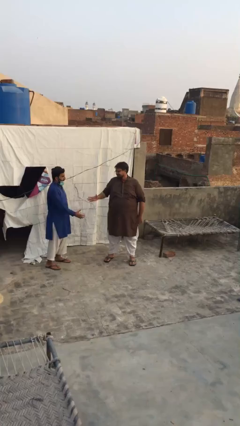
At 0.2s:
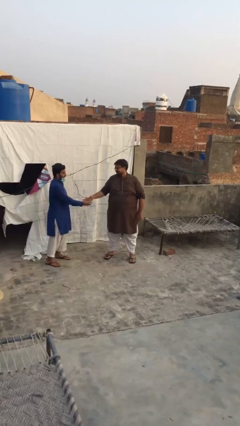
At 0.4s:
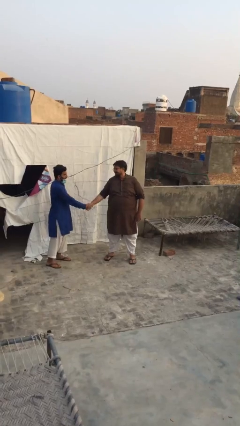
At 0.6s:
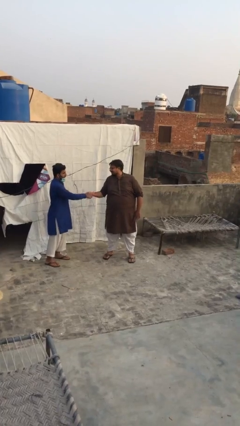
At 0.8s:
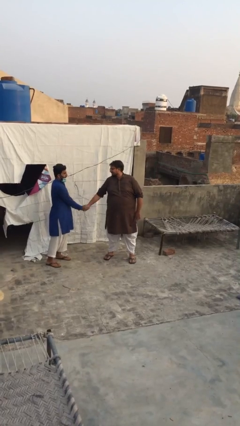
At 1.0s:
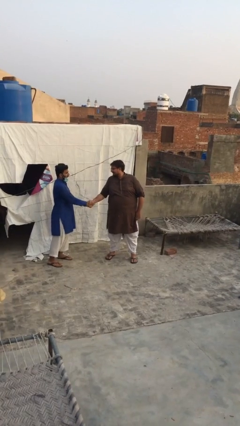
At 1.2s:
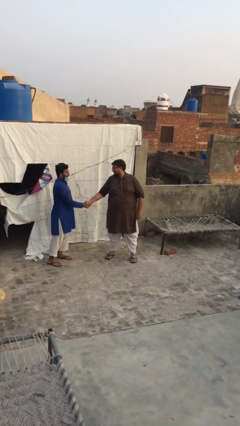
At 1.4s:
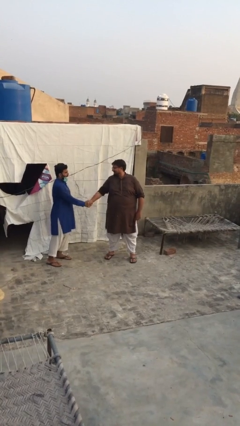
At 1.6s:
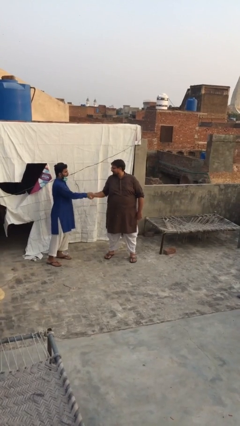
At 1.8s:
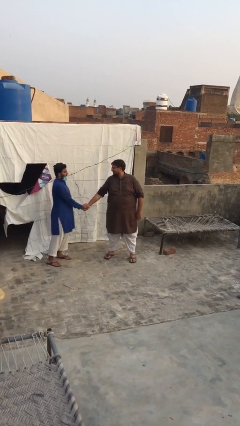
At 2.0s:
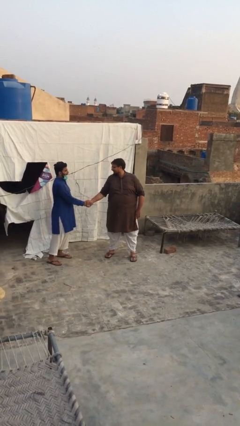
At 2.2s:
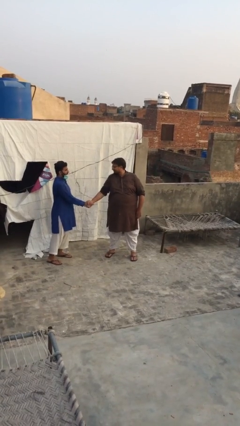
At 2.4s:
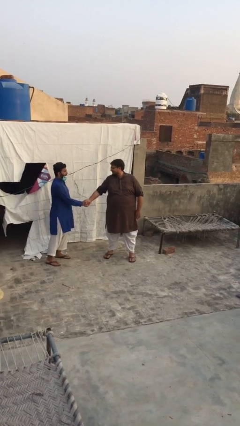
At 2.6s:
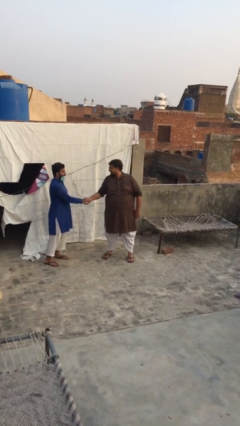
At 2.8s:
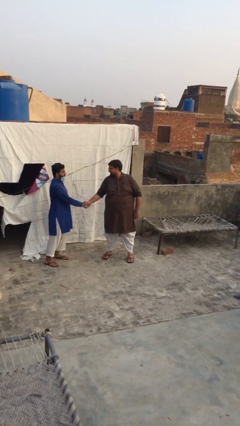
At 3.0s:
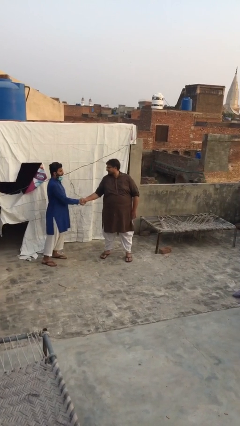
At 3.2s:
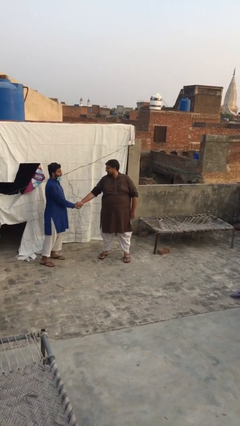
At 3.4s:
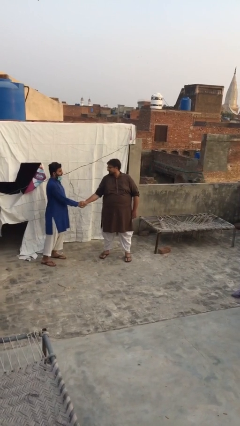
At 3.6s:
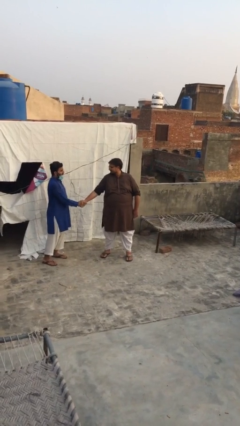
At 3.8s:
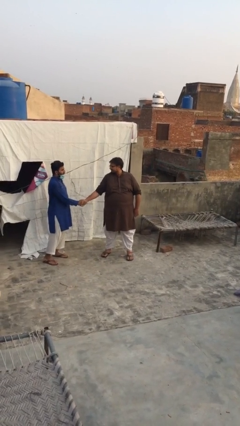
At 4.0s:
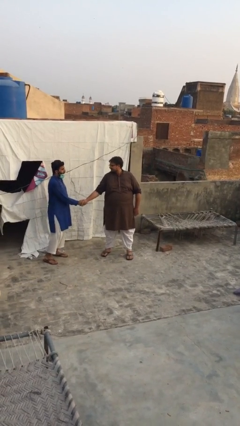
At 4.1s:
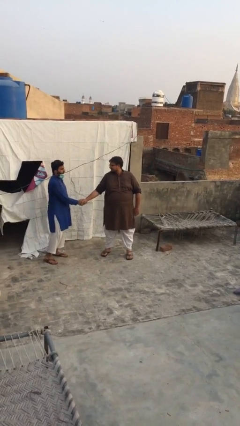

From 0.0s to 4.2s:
person shakes hand

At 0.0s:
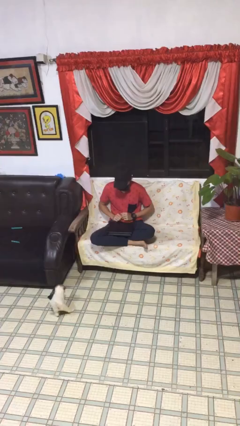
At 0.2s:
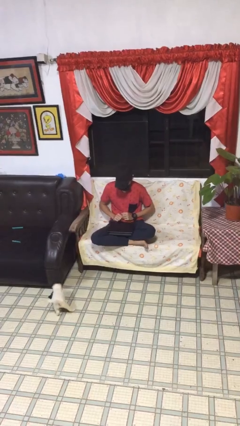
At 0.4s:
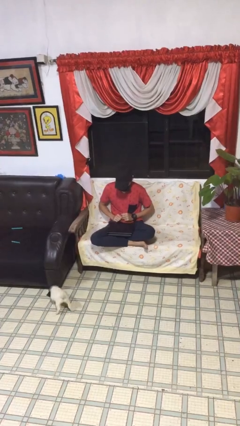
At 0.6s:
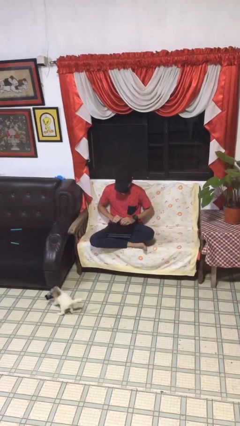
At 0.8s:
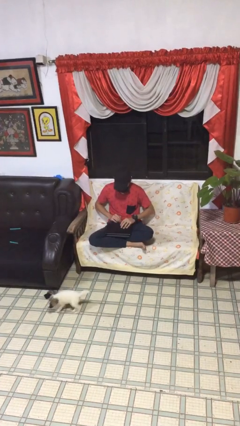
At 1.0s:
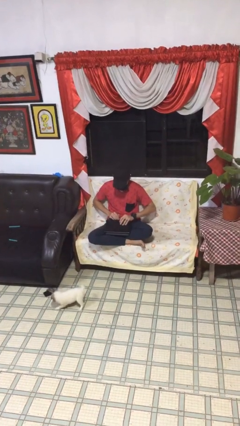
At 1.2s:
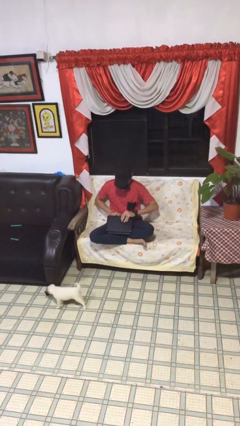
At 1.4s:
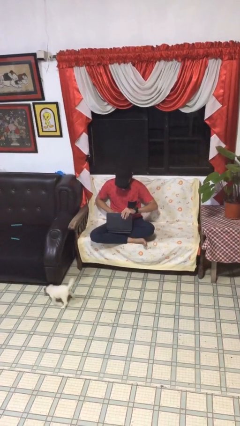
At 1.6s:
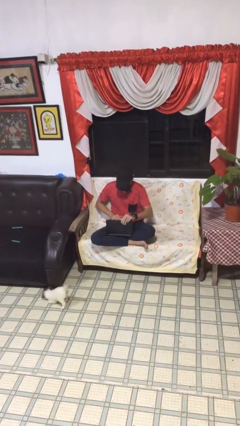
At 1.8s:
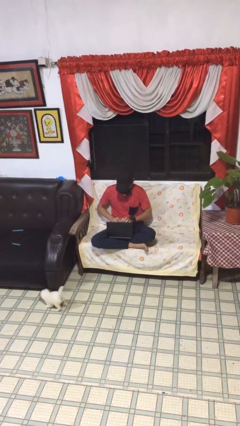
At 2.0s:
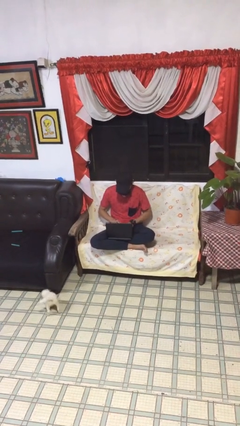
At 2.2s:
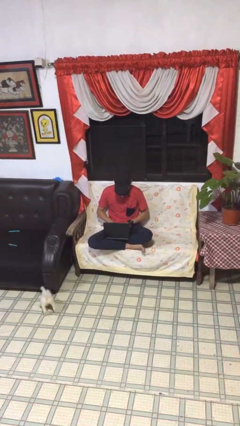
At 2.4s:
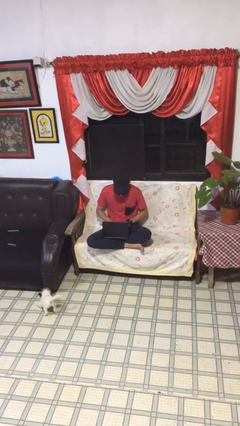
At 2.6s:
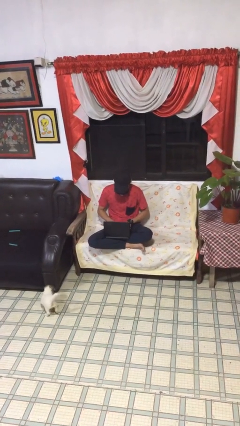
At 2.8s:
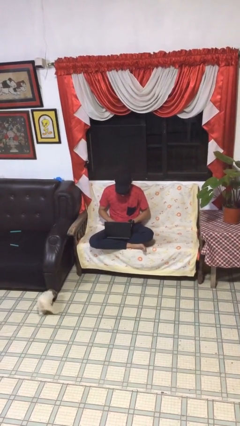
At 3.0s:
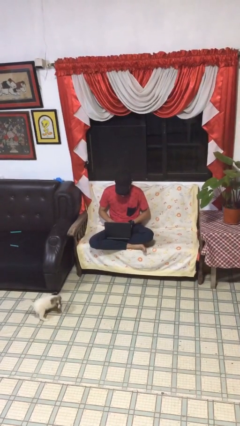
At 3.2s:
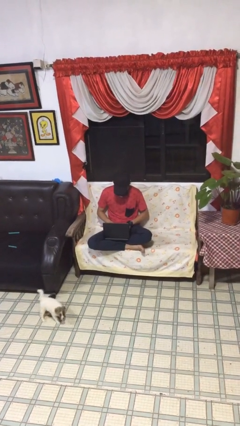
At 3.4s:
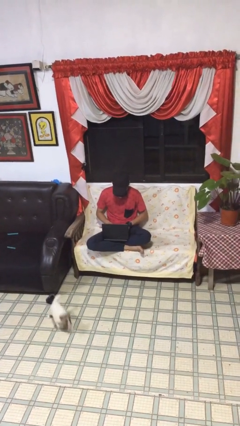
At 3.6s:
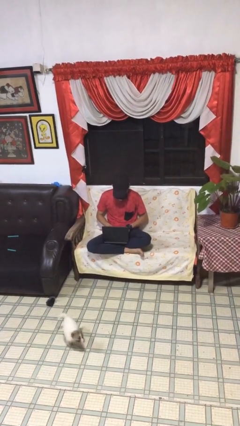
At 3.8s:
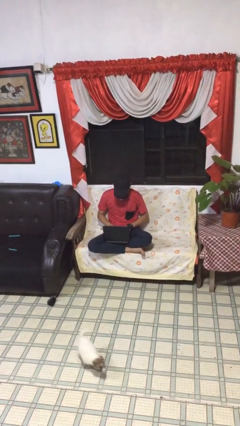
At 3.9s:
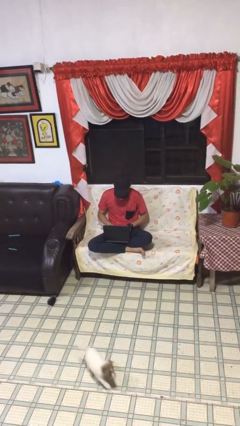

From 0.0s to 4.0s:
person interacts with laptop

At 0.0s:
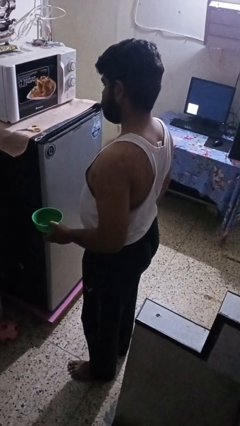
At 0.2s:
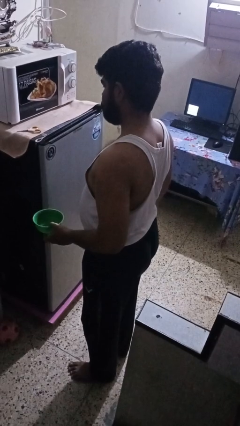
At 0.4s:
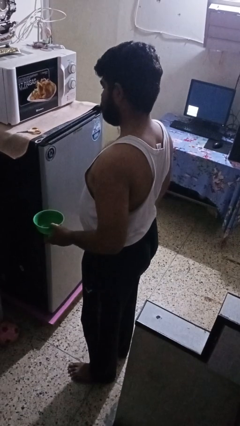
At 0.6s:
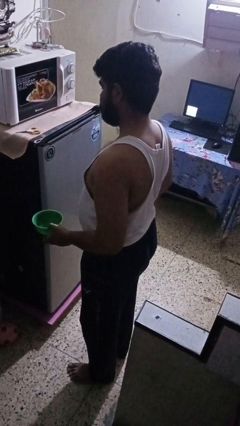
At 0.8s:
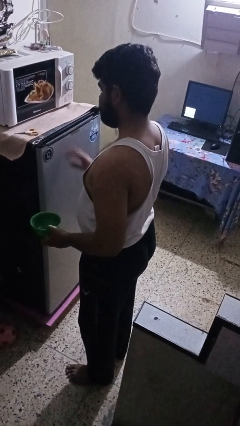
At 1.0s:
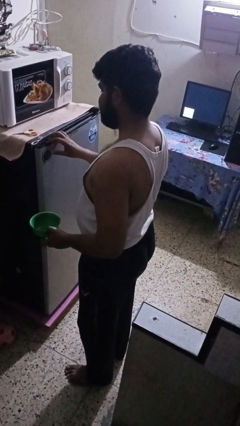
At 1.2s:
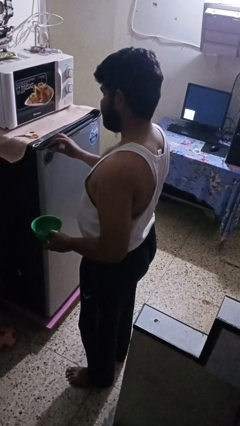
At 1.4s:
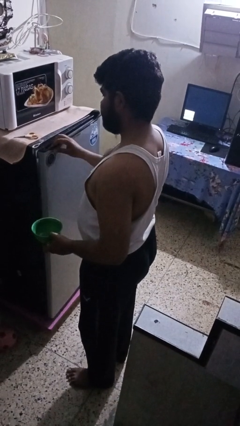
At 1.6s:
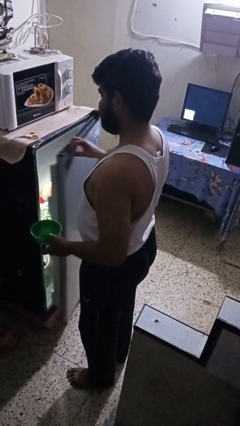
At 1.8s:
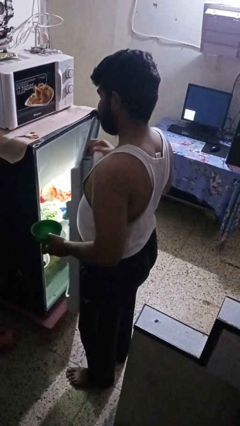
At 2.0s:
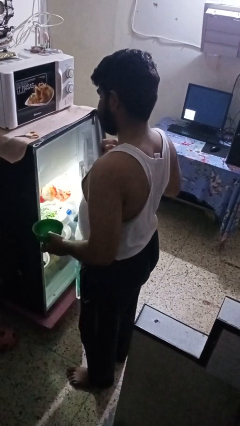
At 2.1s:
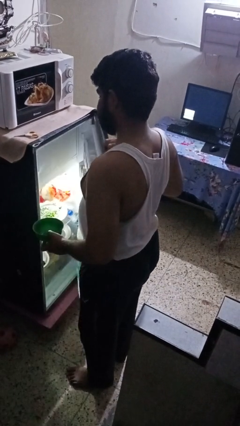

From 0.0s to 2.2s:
person opens refrigerator

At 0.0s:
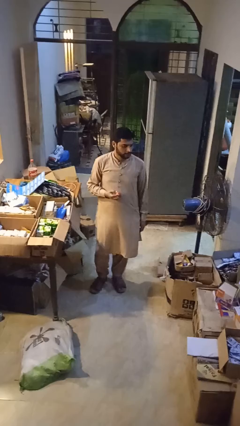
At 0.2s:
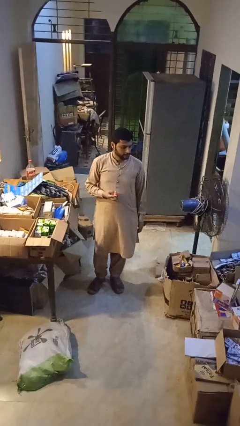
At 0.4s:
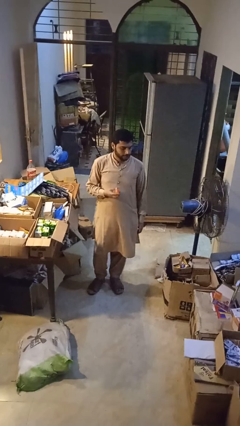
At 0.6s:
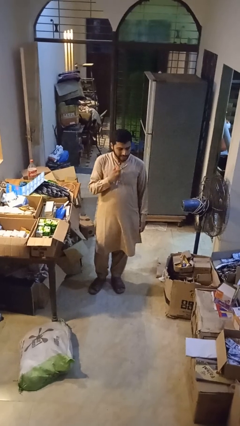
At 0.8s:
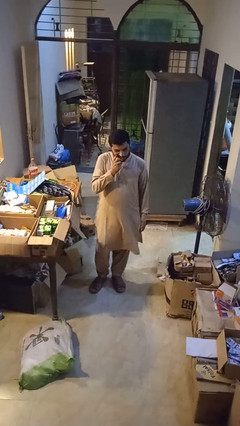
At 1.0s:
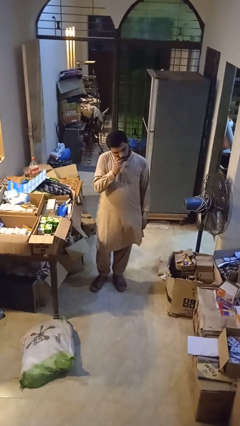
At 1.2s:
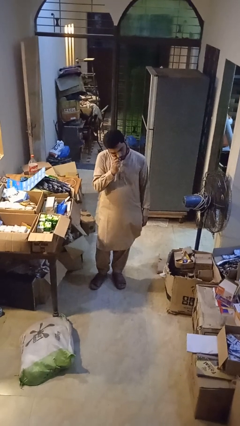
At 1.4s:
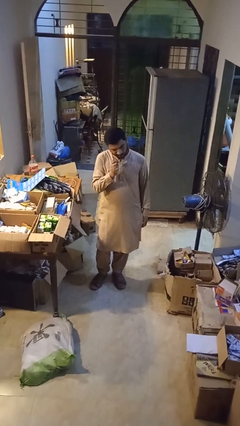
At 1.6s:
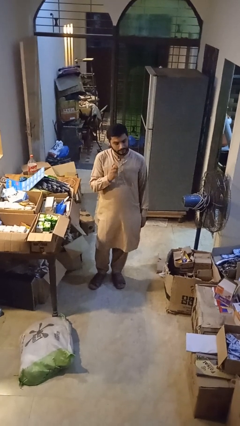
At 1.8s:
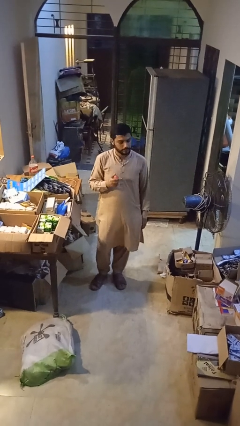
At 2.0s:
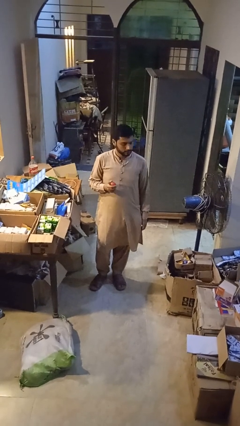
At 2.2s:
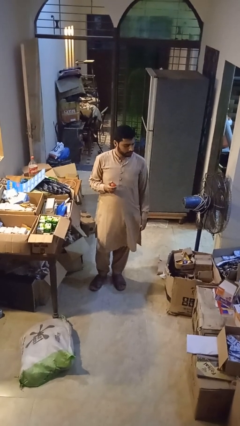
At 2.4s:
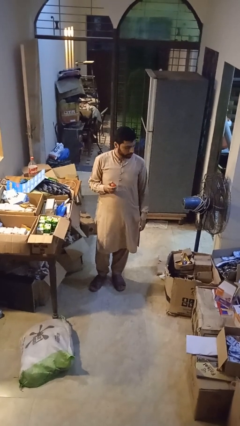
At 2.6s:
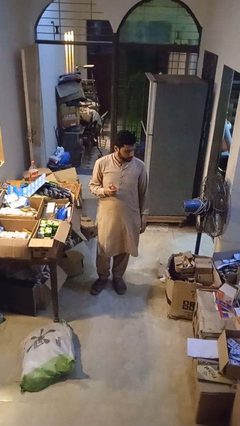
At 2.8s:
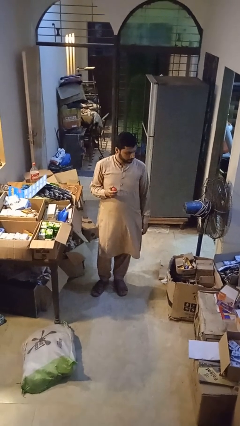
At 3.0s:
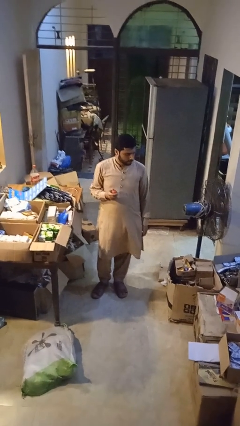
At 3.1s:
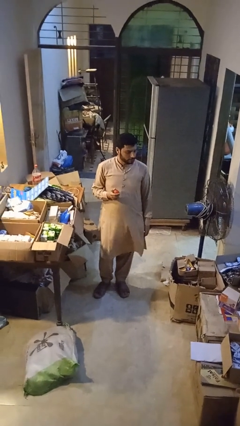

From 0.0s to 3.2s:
person eats apple

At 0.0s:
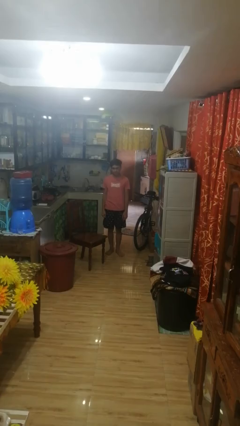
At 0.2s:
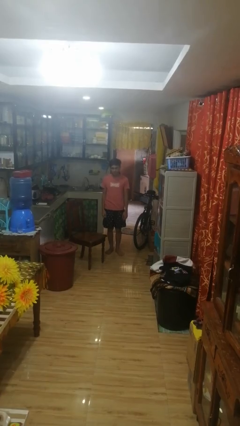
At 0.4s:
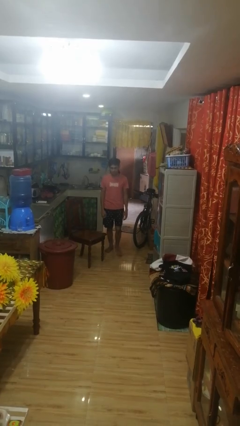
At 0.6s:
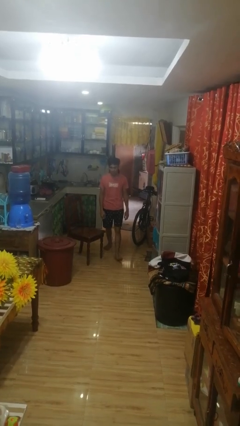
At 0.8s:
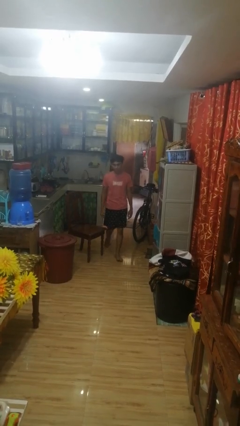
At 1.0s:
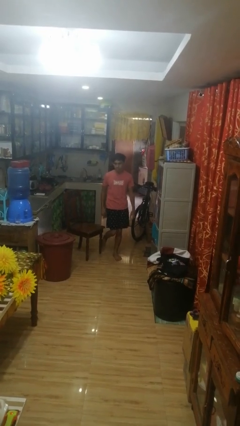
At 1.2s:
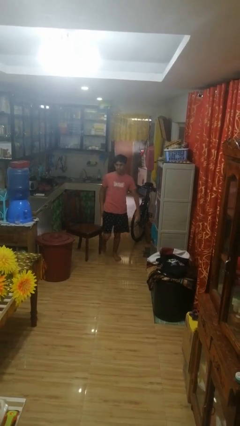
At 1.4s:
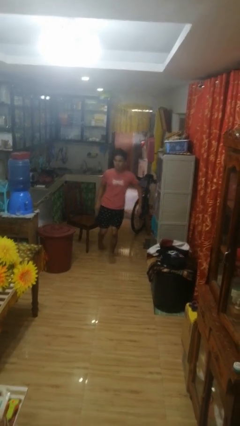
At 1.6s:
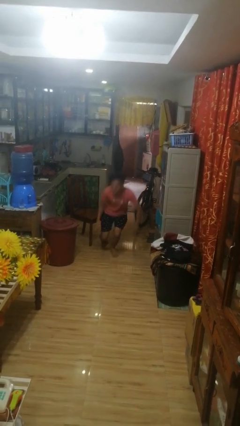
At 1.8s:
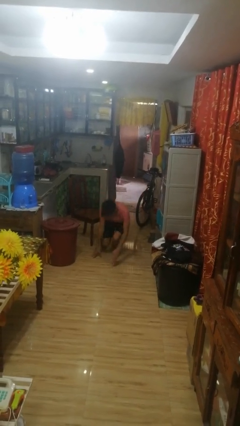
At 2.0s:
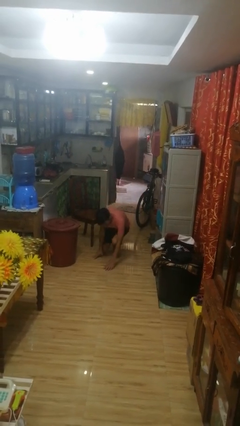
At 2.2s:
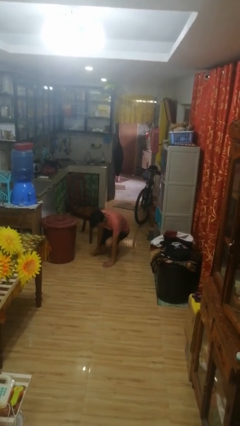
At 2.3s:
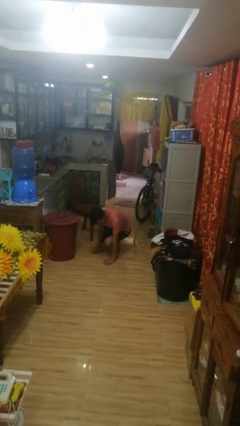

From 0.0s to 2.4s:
person trips on object on floor

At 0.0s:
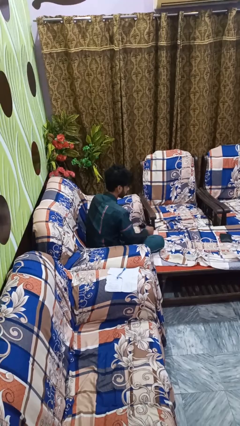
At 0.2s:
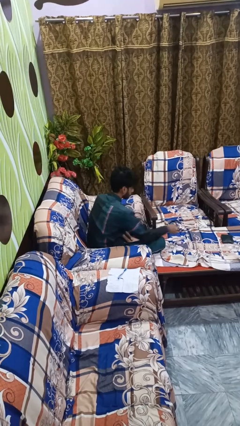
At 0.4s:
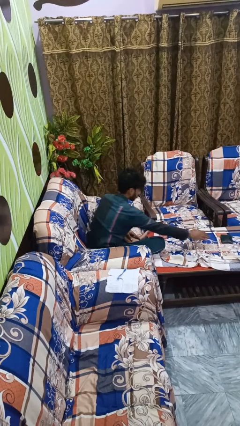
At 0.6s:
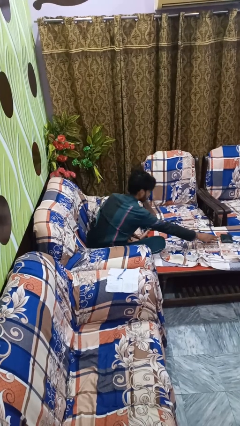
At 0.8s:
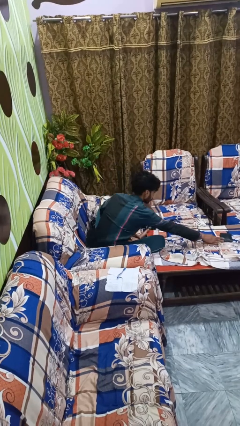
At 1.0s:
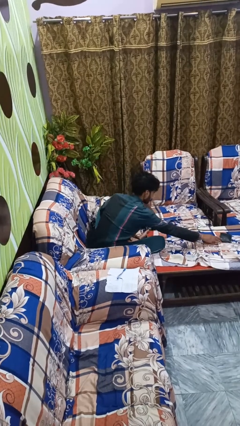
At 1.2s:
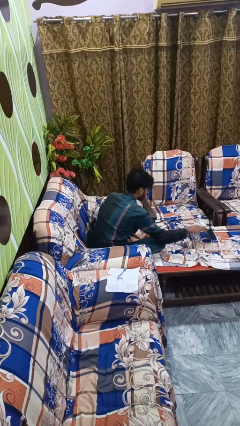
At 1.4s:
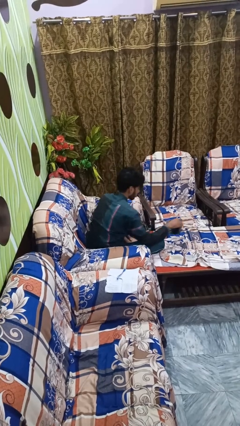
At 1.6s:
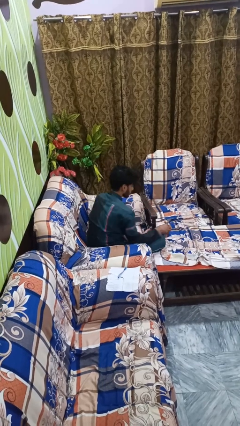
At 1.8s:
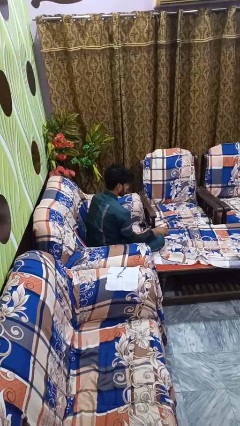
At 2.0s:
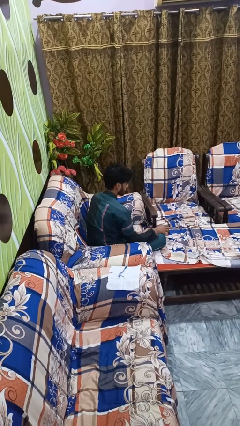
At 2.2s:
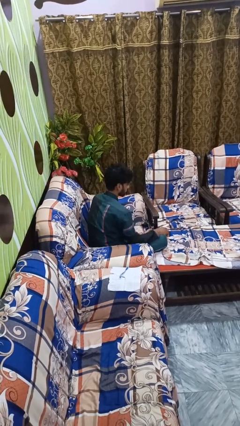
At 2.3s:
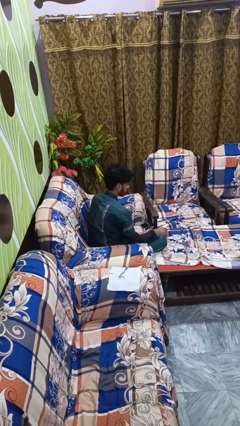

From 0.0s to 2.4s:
person picks up object from floor
